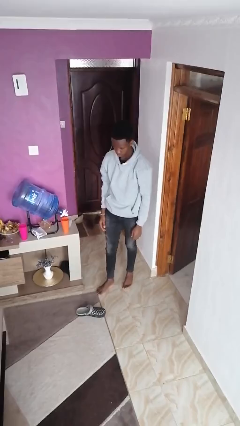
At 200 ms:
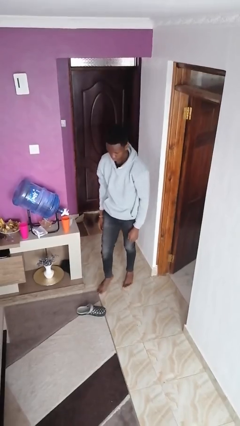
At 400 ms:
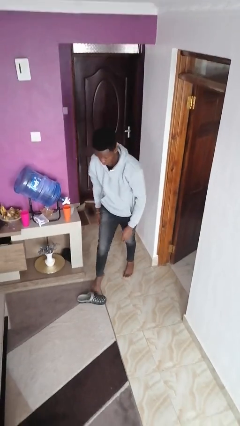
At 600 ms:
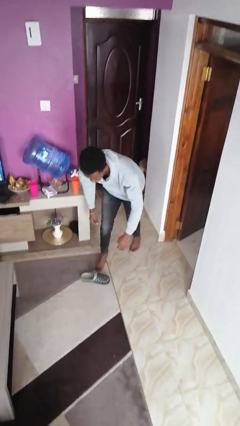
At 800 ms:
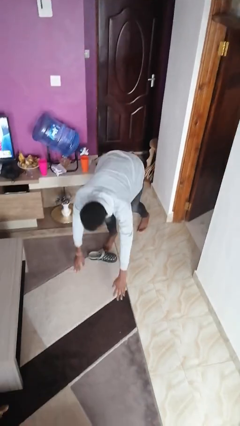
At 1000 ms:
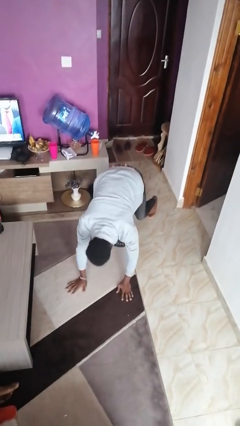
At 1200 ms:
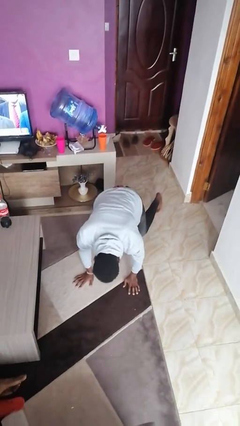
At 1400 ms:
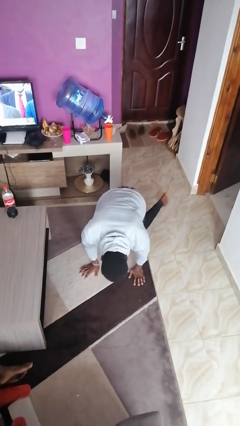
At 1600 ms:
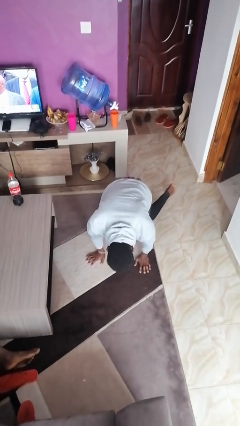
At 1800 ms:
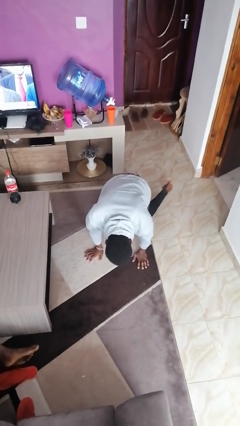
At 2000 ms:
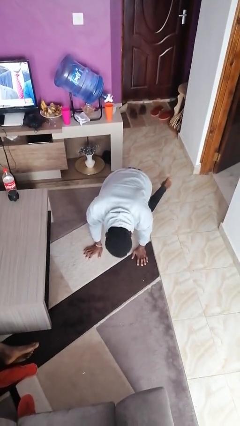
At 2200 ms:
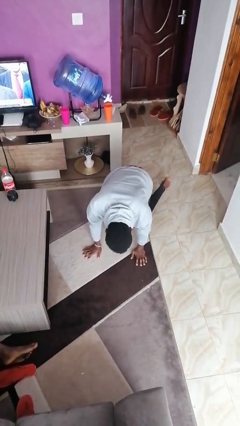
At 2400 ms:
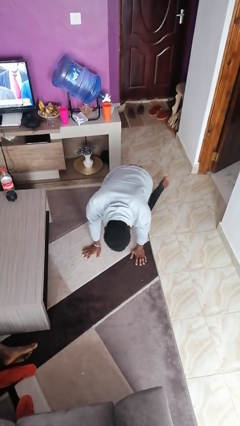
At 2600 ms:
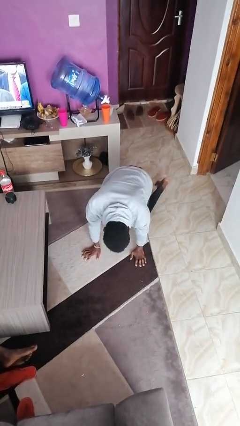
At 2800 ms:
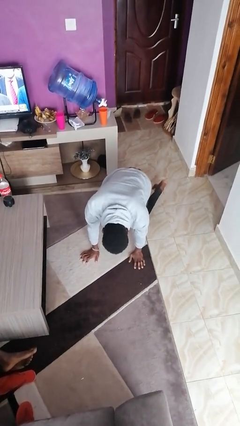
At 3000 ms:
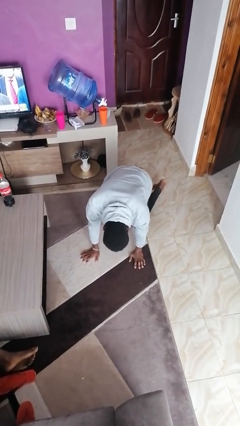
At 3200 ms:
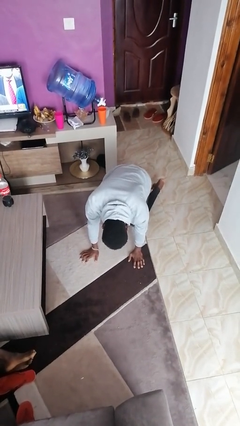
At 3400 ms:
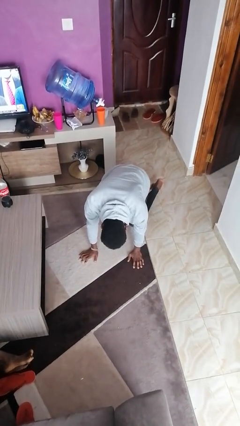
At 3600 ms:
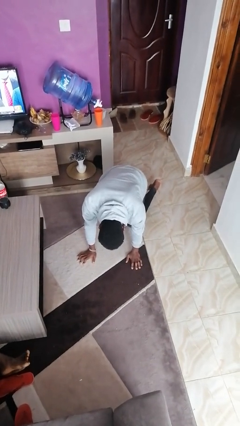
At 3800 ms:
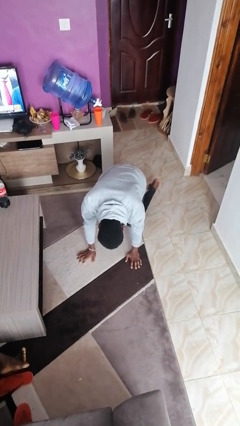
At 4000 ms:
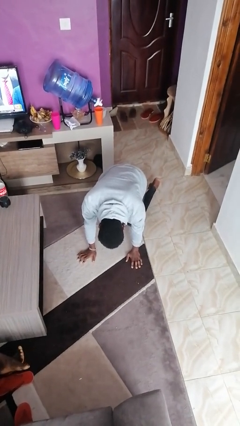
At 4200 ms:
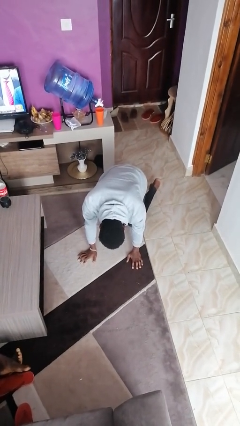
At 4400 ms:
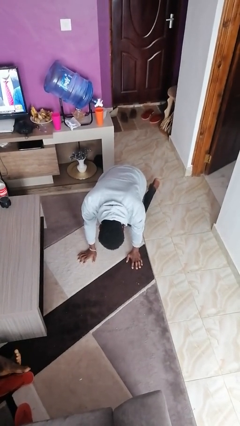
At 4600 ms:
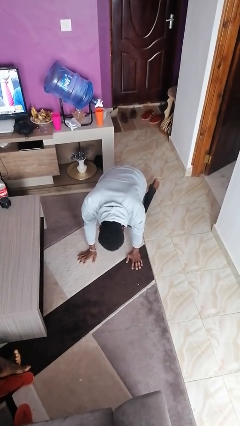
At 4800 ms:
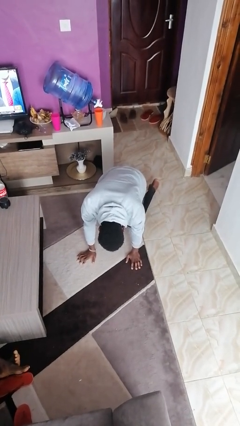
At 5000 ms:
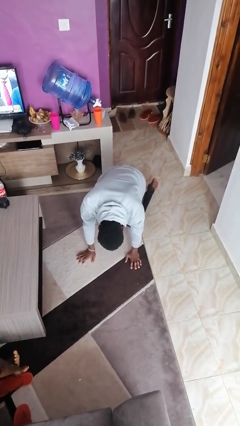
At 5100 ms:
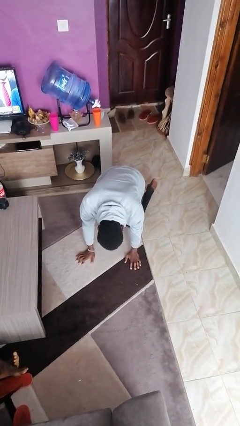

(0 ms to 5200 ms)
person trips on object on floor

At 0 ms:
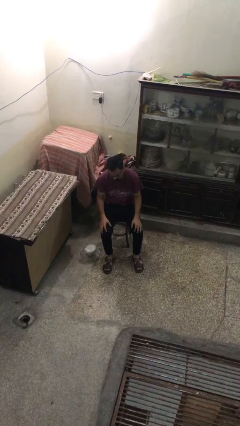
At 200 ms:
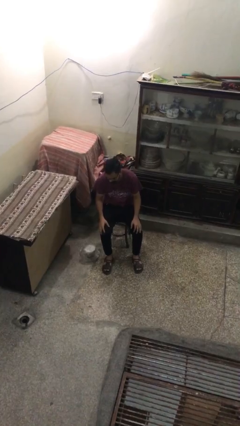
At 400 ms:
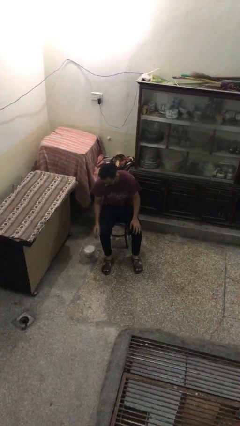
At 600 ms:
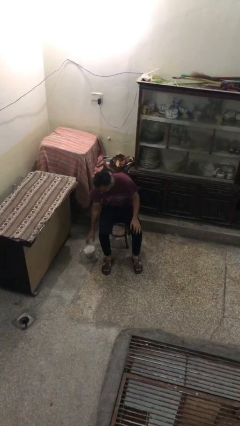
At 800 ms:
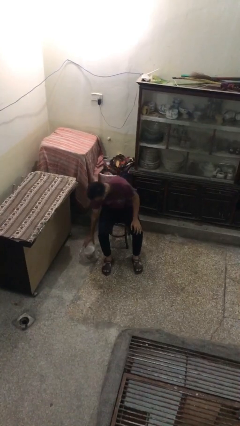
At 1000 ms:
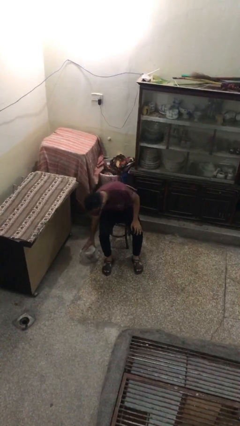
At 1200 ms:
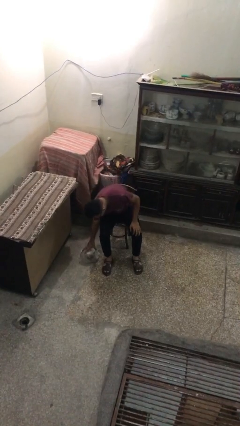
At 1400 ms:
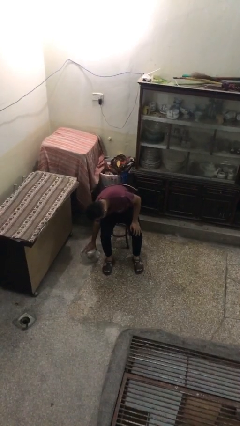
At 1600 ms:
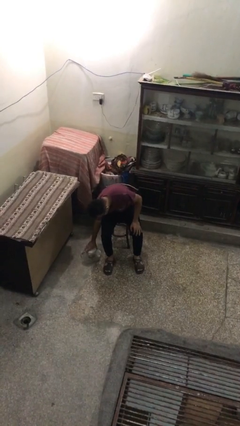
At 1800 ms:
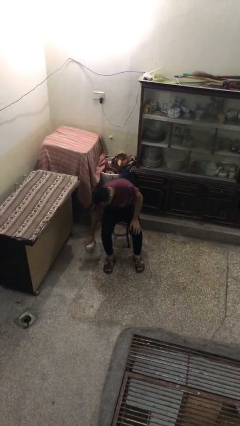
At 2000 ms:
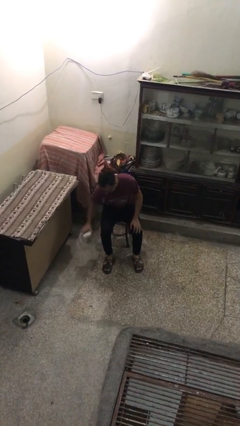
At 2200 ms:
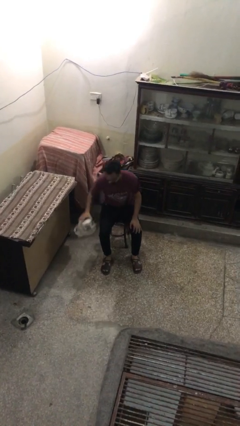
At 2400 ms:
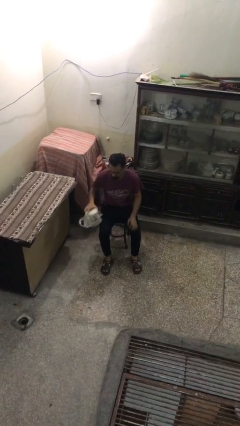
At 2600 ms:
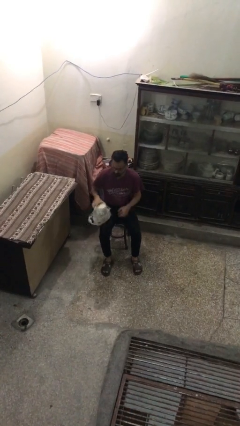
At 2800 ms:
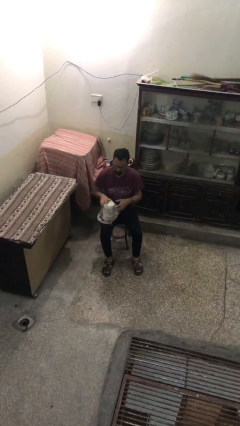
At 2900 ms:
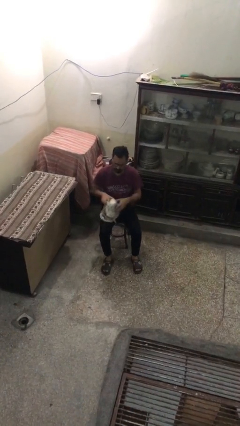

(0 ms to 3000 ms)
person picks up object from floor

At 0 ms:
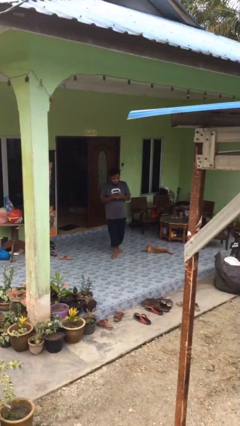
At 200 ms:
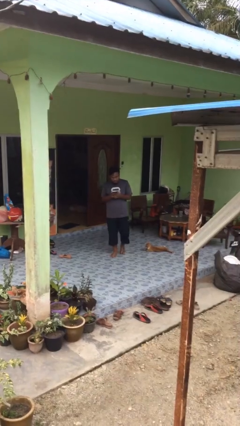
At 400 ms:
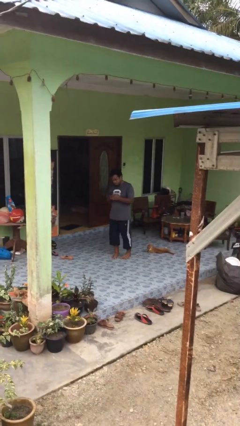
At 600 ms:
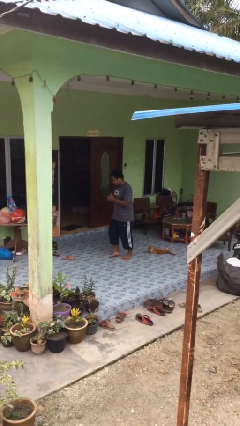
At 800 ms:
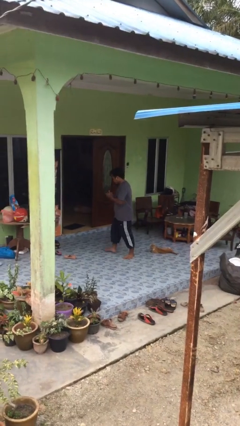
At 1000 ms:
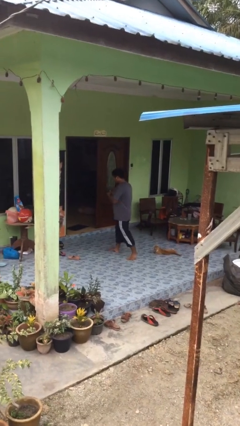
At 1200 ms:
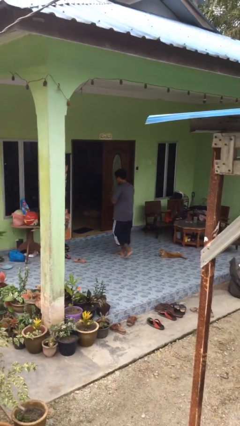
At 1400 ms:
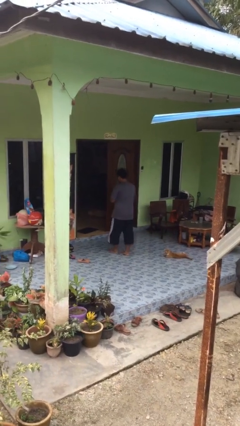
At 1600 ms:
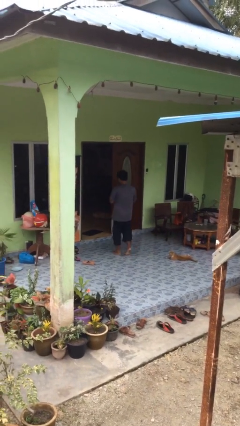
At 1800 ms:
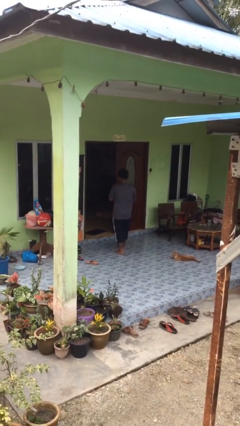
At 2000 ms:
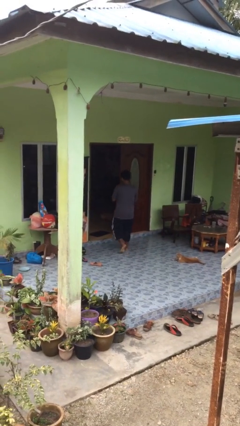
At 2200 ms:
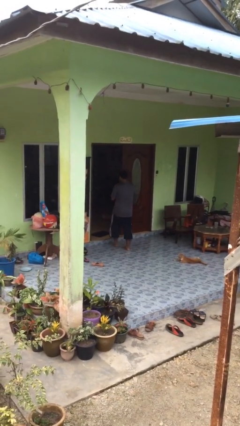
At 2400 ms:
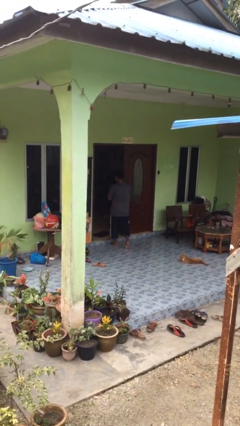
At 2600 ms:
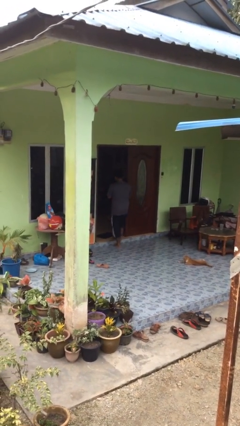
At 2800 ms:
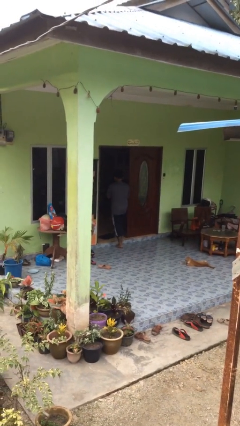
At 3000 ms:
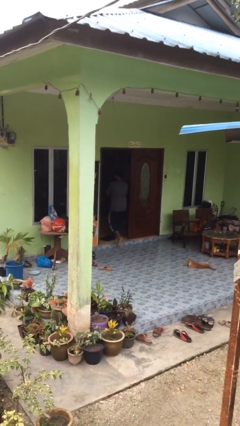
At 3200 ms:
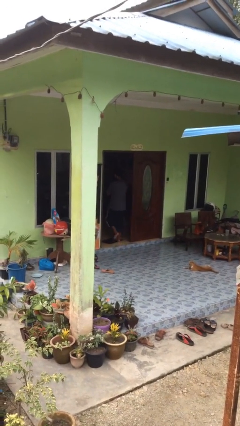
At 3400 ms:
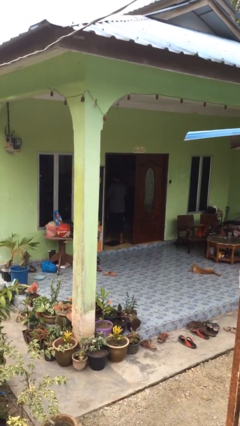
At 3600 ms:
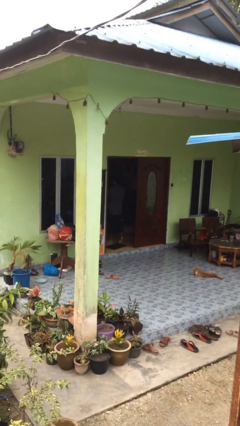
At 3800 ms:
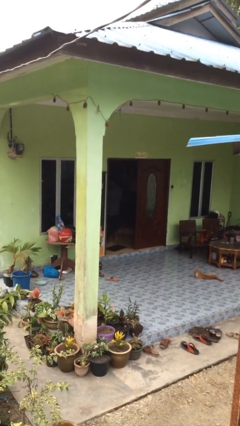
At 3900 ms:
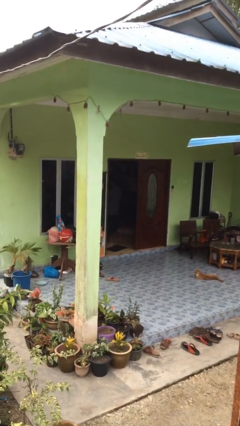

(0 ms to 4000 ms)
person exits scene through structure

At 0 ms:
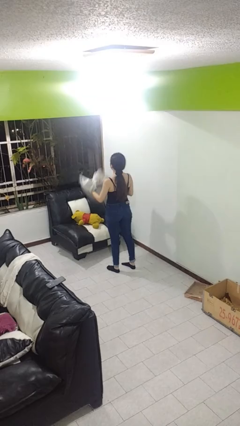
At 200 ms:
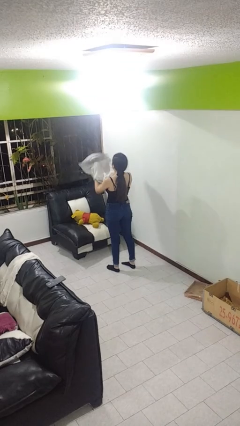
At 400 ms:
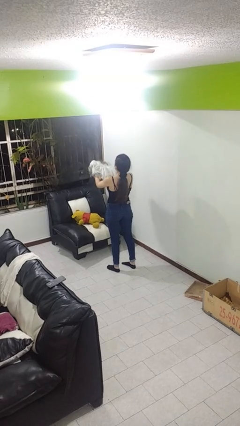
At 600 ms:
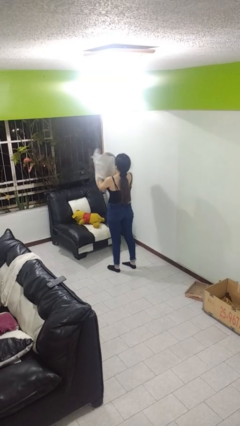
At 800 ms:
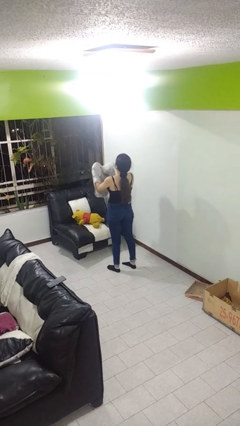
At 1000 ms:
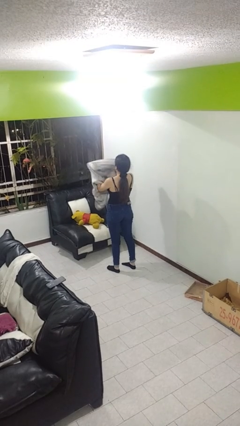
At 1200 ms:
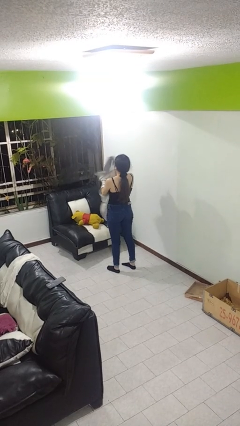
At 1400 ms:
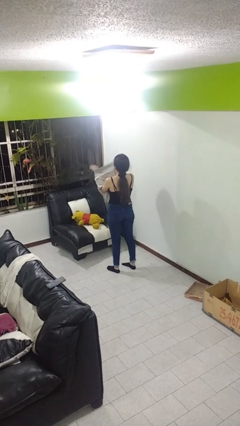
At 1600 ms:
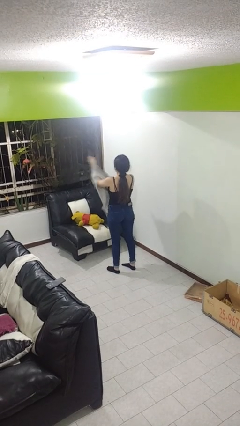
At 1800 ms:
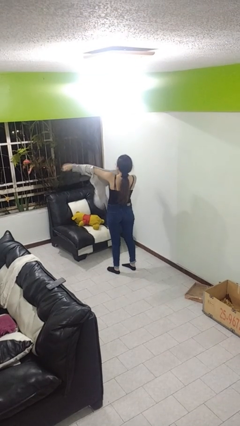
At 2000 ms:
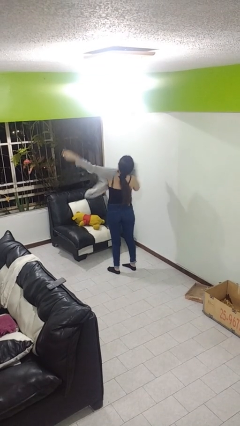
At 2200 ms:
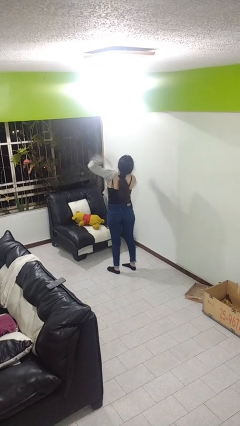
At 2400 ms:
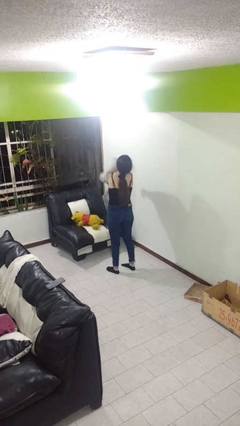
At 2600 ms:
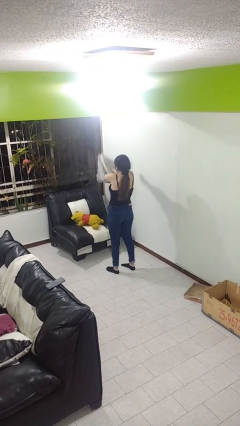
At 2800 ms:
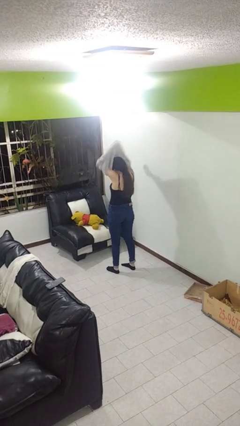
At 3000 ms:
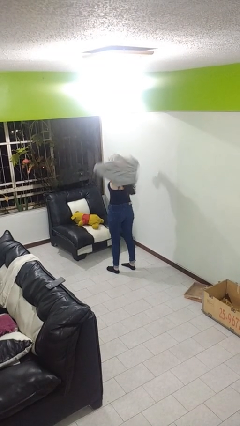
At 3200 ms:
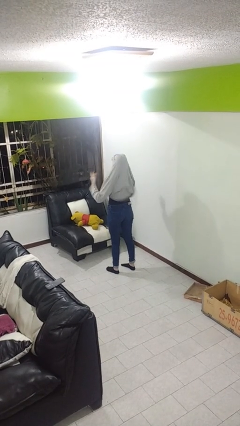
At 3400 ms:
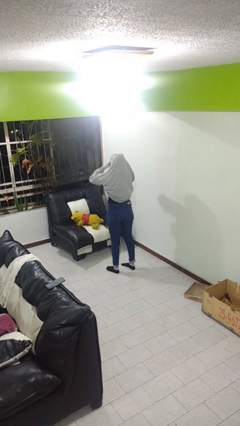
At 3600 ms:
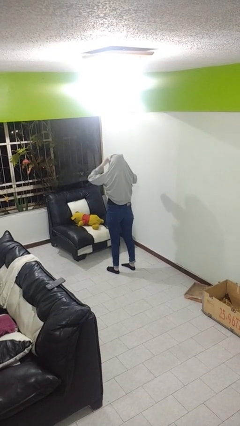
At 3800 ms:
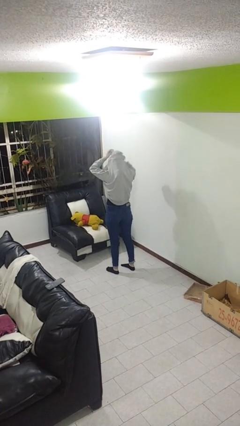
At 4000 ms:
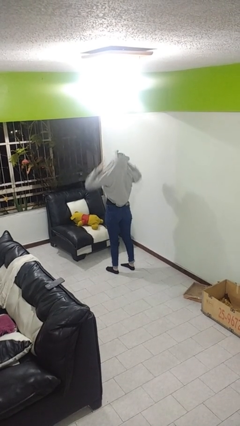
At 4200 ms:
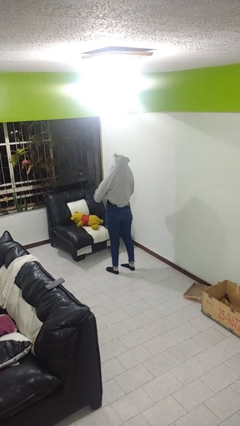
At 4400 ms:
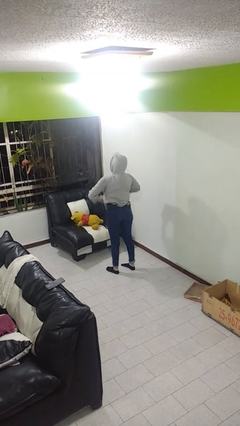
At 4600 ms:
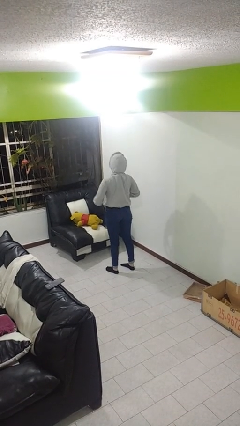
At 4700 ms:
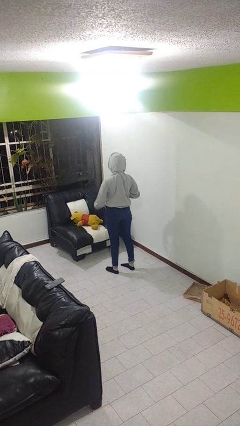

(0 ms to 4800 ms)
person puts on hoodie

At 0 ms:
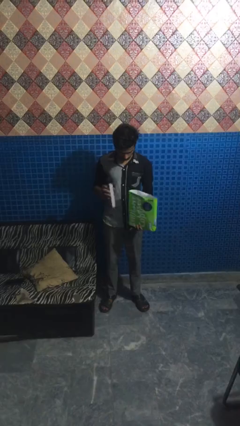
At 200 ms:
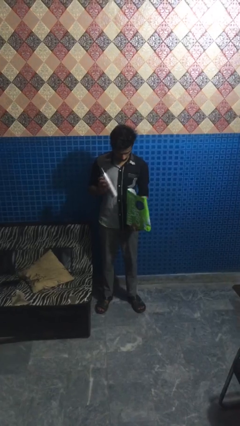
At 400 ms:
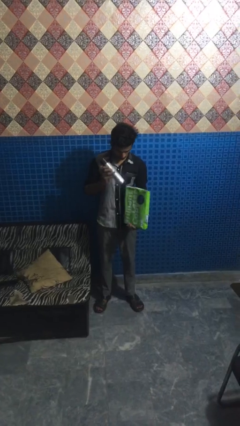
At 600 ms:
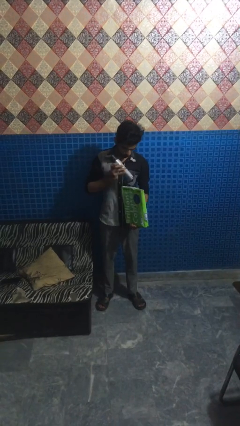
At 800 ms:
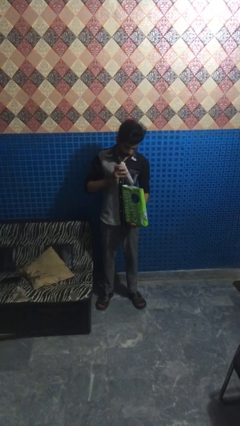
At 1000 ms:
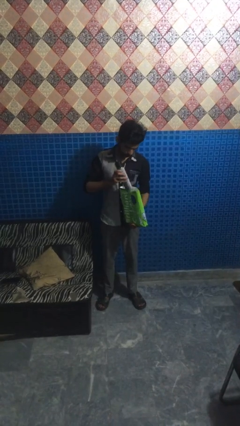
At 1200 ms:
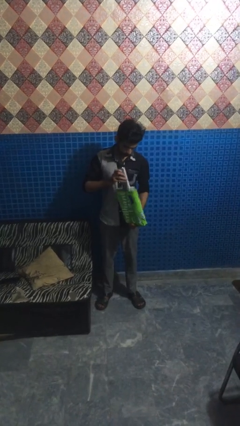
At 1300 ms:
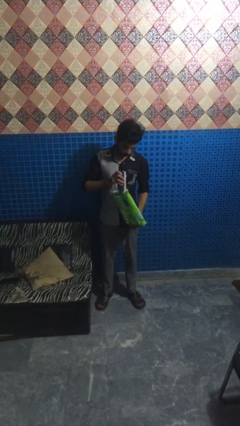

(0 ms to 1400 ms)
person puts object into bag
